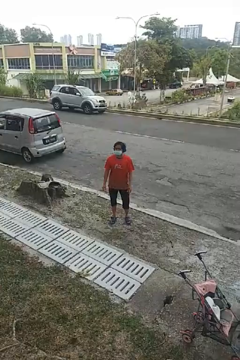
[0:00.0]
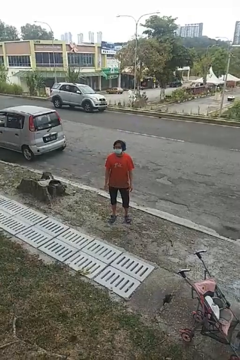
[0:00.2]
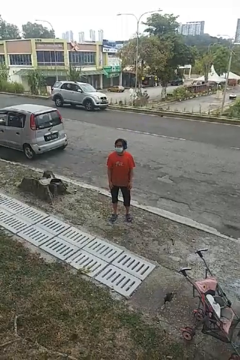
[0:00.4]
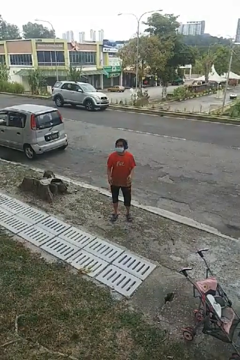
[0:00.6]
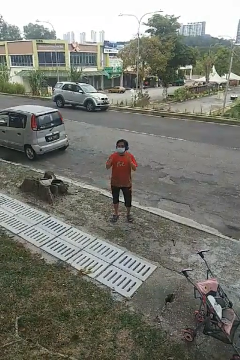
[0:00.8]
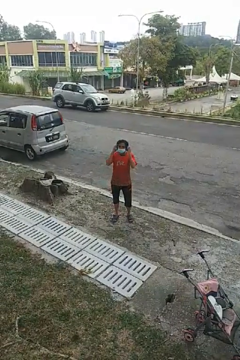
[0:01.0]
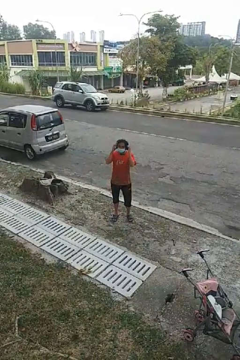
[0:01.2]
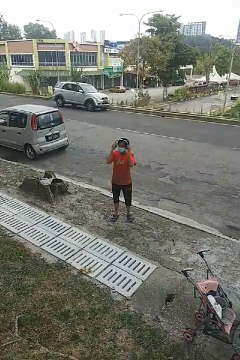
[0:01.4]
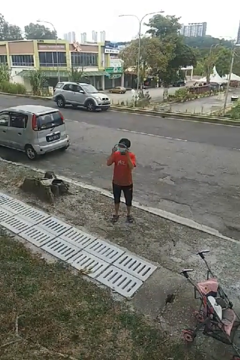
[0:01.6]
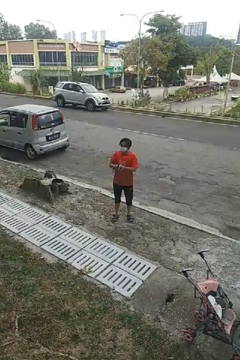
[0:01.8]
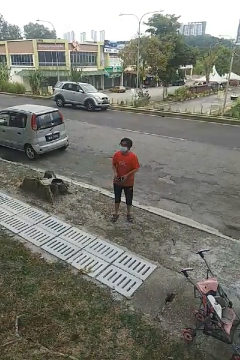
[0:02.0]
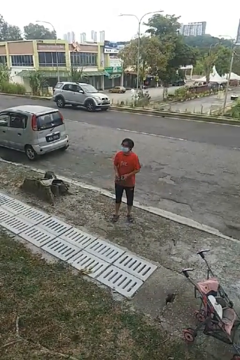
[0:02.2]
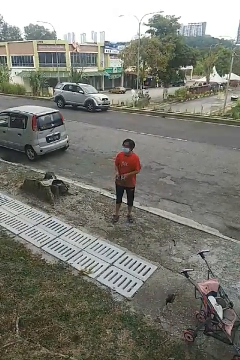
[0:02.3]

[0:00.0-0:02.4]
person takes off headphones

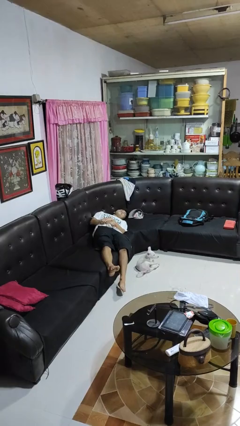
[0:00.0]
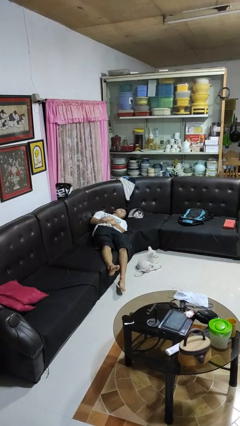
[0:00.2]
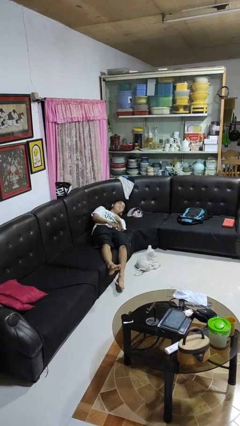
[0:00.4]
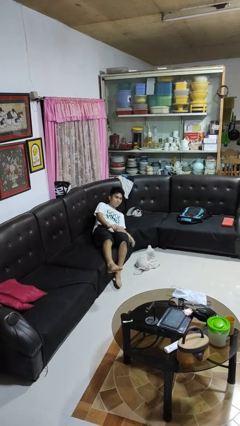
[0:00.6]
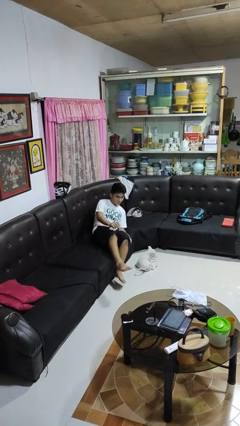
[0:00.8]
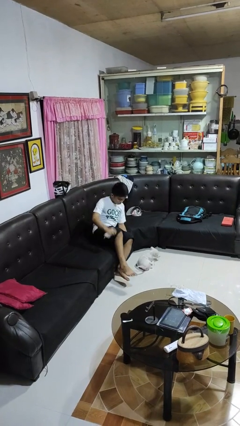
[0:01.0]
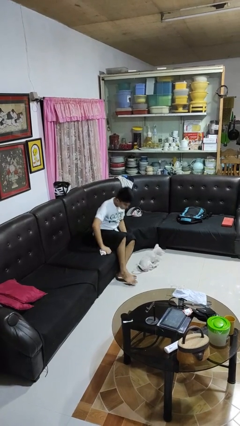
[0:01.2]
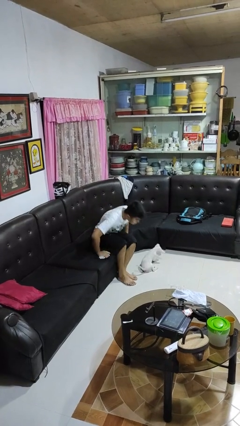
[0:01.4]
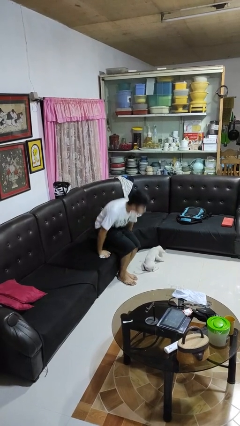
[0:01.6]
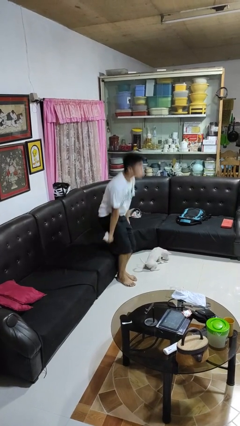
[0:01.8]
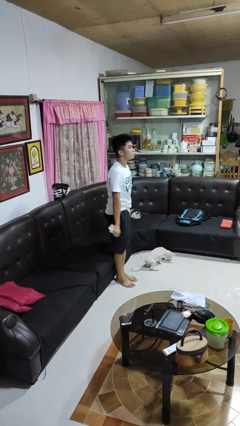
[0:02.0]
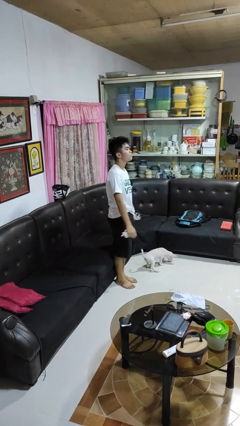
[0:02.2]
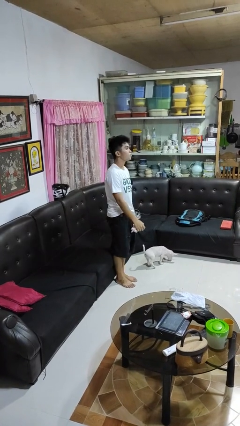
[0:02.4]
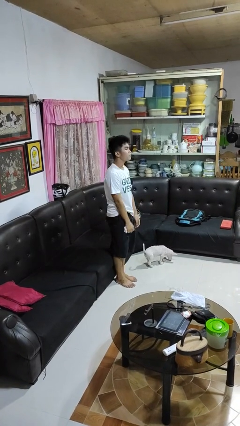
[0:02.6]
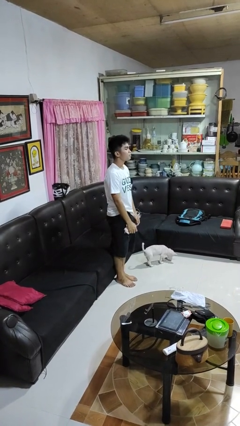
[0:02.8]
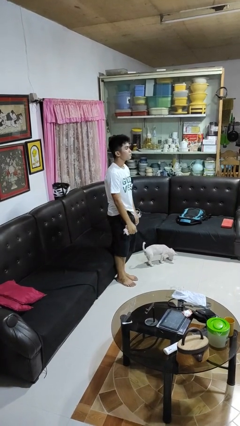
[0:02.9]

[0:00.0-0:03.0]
person stands up

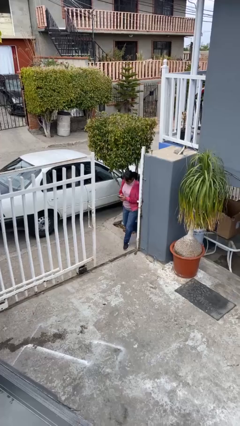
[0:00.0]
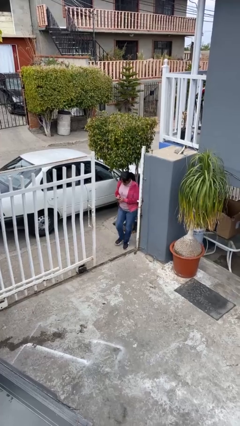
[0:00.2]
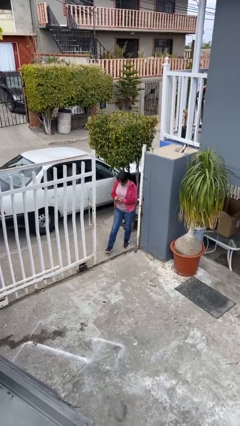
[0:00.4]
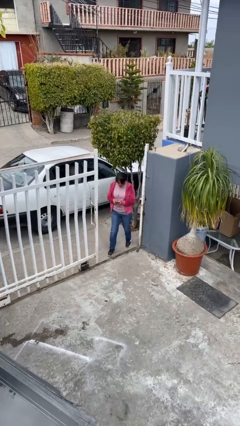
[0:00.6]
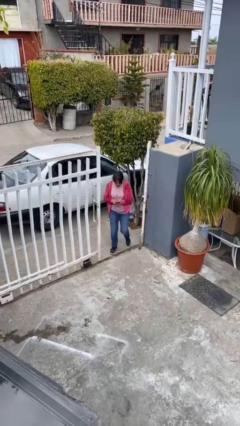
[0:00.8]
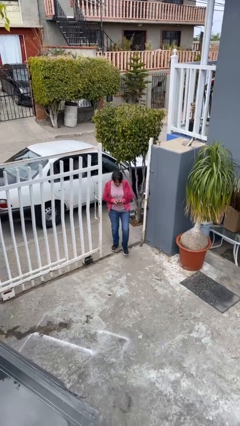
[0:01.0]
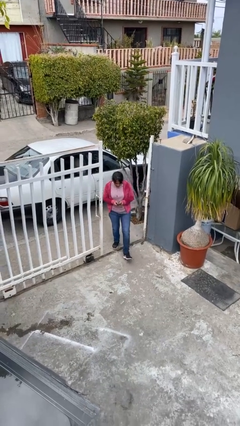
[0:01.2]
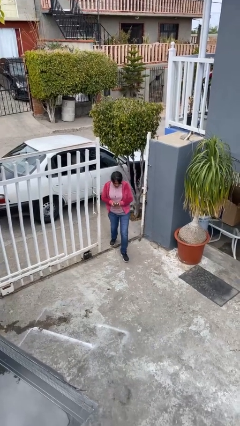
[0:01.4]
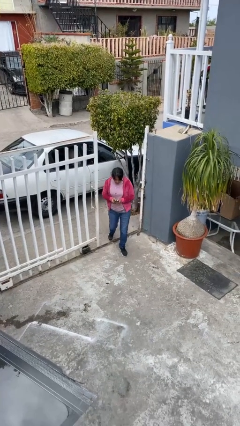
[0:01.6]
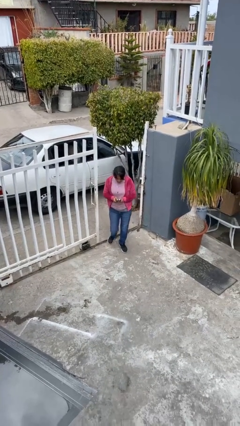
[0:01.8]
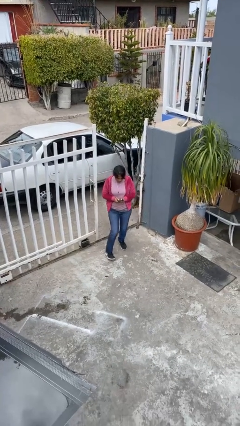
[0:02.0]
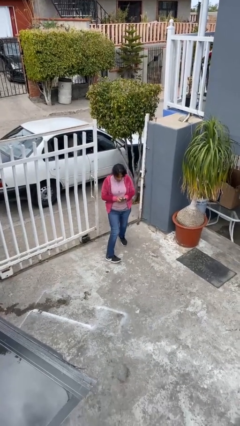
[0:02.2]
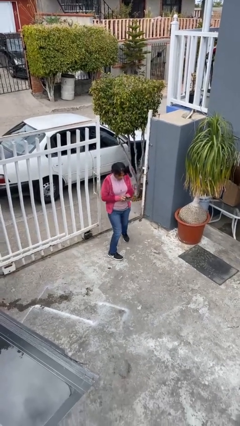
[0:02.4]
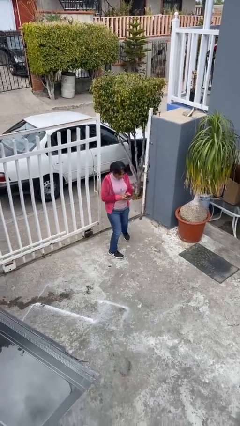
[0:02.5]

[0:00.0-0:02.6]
person enters scene through structure

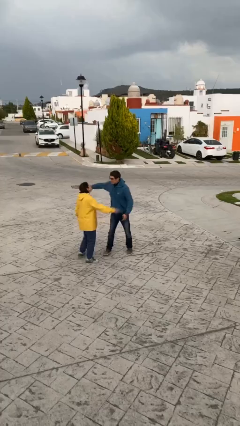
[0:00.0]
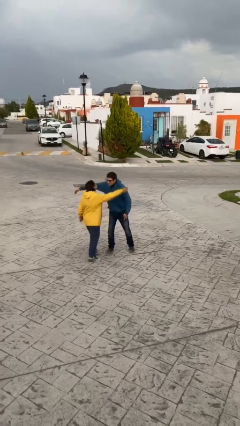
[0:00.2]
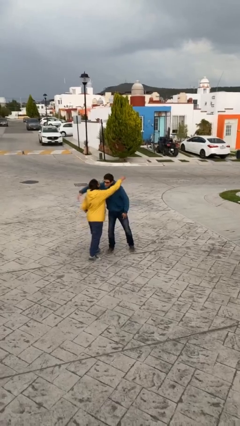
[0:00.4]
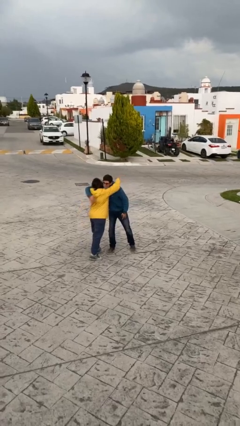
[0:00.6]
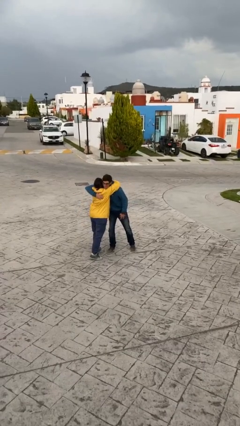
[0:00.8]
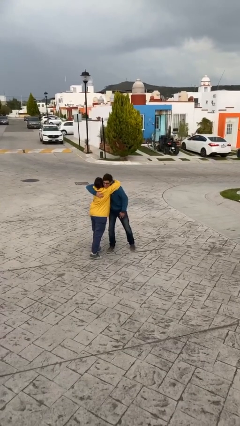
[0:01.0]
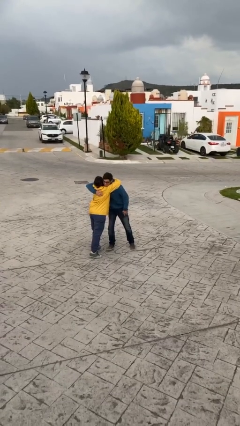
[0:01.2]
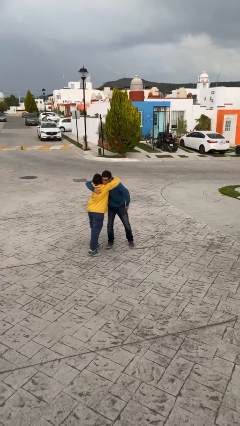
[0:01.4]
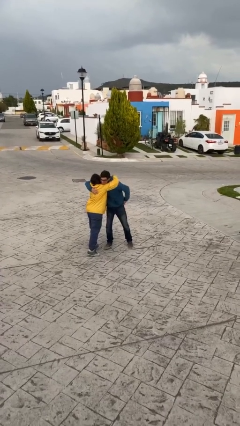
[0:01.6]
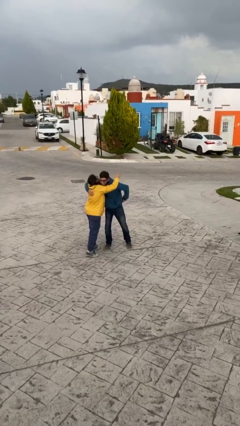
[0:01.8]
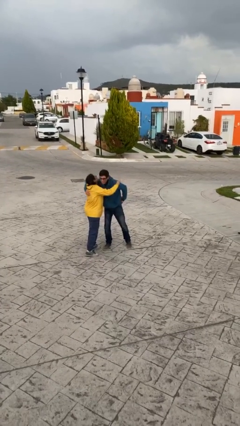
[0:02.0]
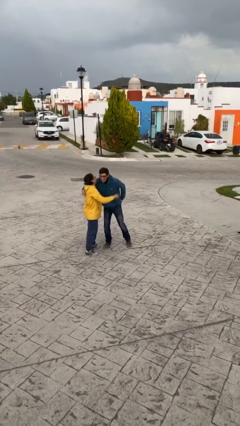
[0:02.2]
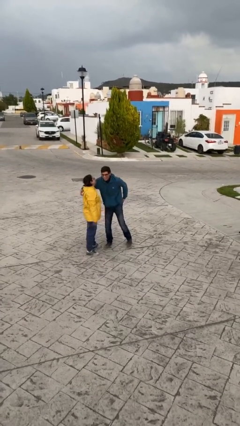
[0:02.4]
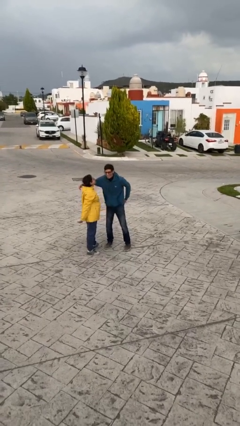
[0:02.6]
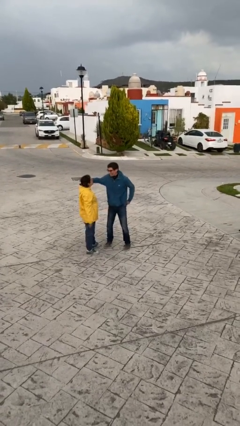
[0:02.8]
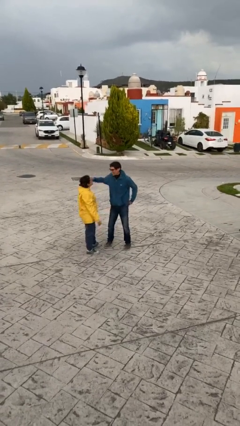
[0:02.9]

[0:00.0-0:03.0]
person embraces person

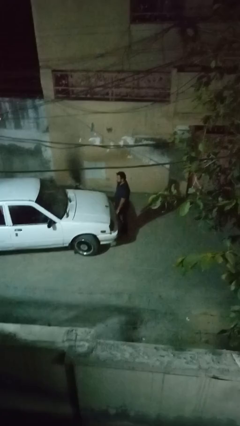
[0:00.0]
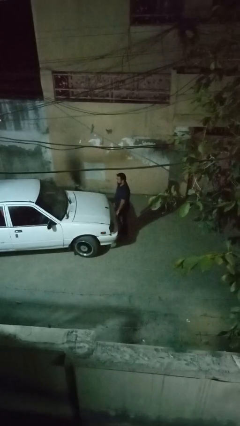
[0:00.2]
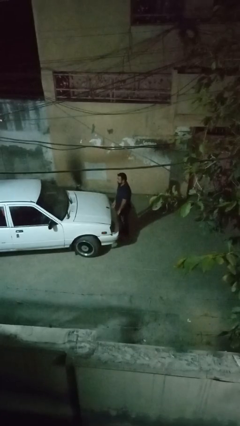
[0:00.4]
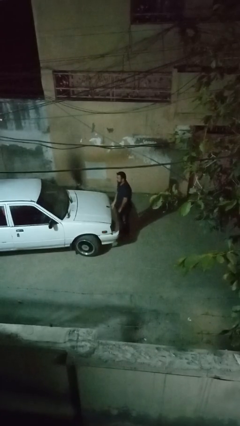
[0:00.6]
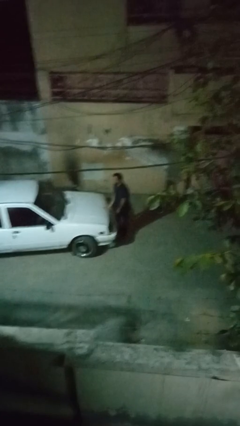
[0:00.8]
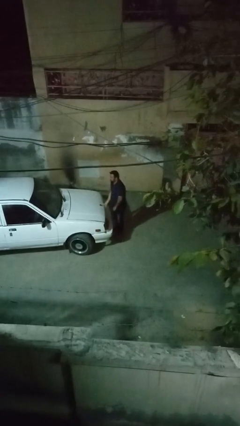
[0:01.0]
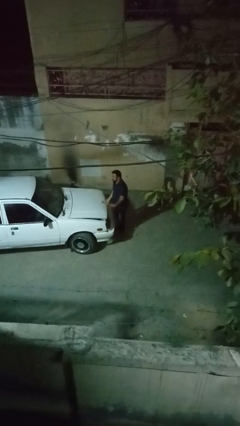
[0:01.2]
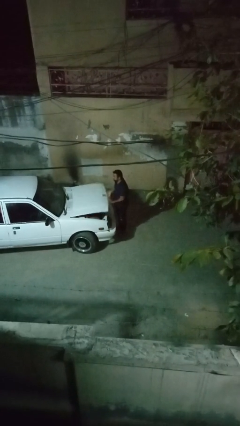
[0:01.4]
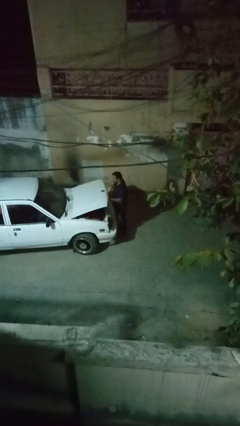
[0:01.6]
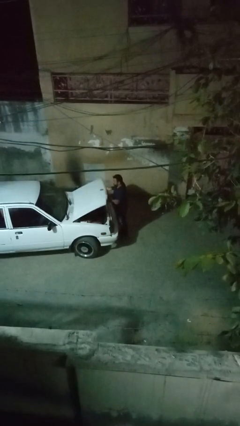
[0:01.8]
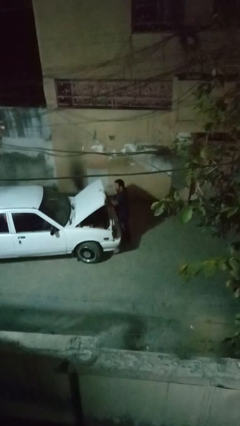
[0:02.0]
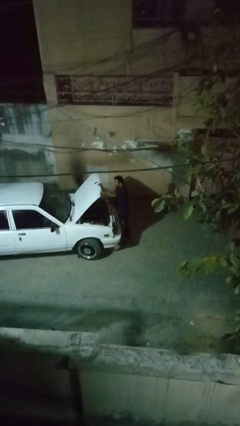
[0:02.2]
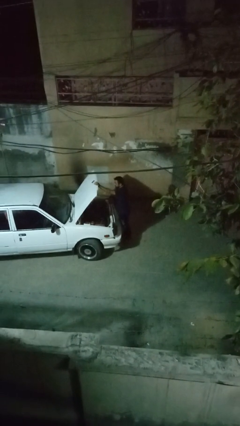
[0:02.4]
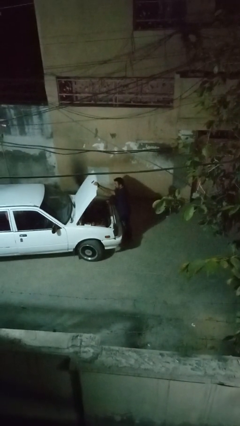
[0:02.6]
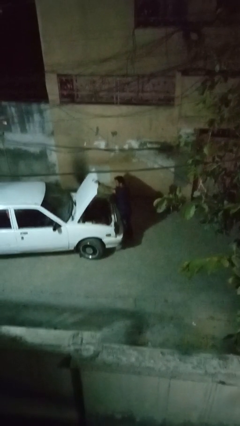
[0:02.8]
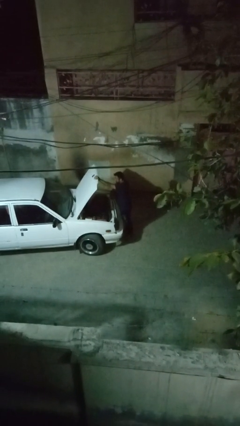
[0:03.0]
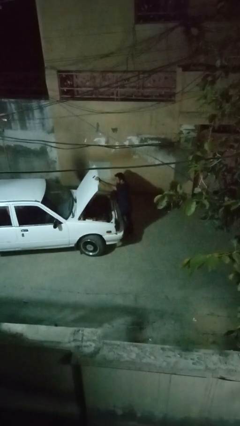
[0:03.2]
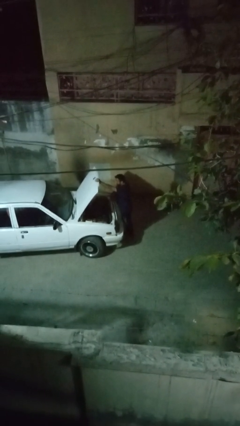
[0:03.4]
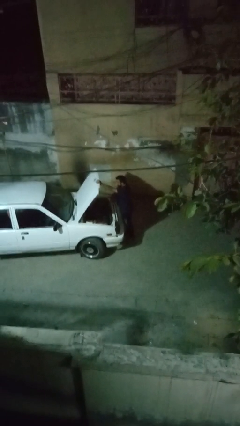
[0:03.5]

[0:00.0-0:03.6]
person opens car hood

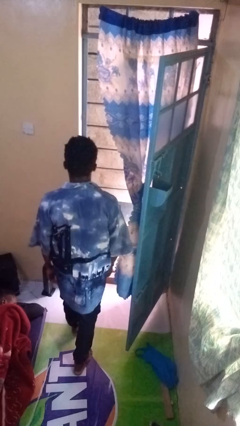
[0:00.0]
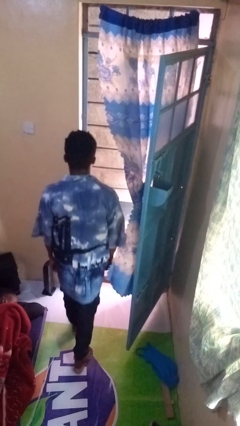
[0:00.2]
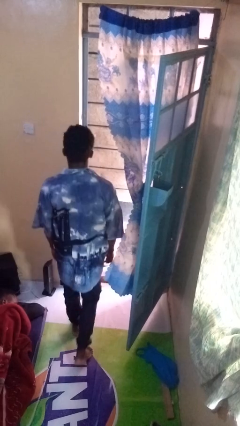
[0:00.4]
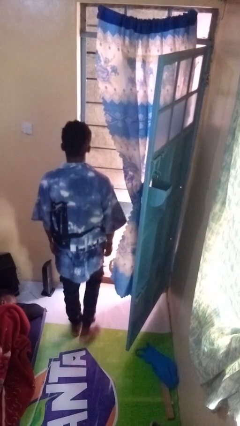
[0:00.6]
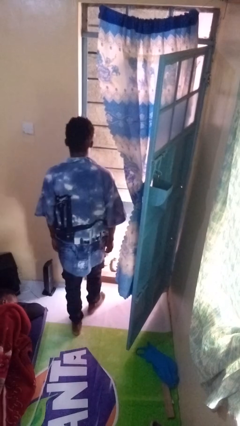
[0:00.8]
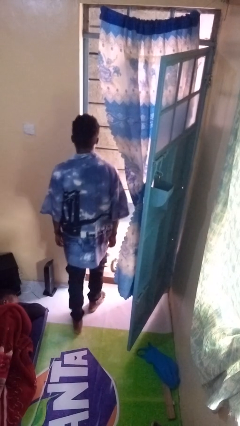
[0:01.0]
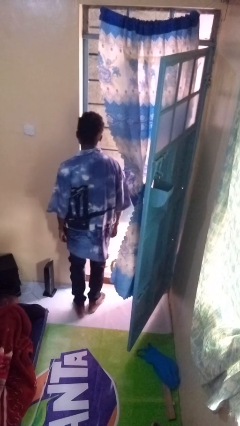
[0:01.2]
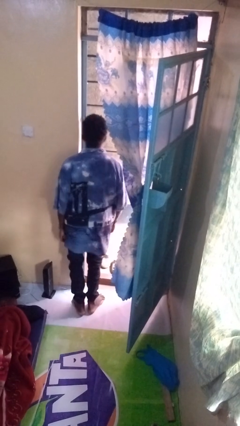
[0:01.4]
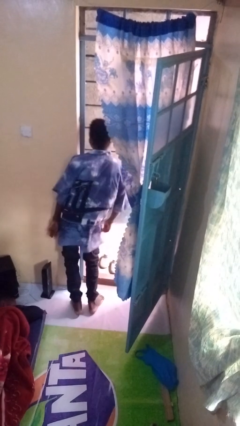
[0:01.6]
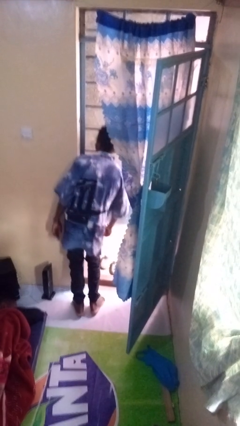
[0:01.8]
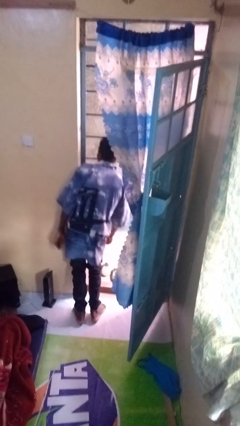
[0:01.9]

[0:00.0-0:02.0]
person bumps into wall

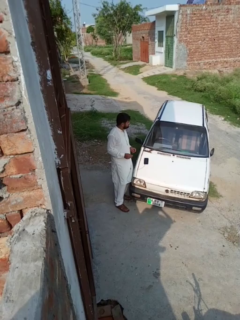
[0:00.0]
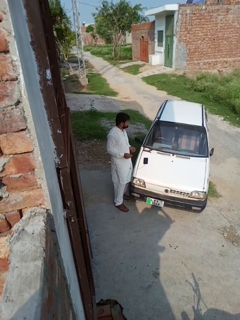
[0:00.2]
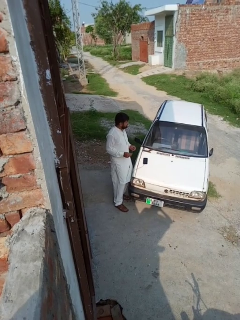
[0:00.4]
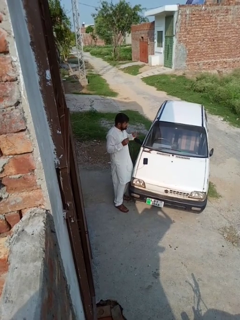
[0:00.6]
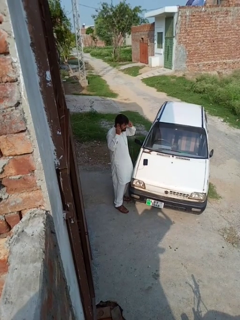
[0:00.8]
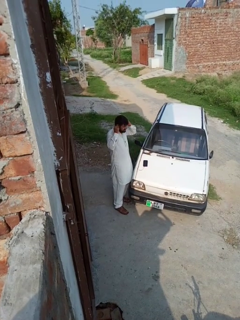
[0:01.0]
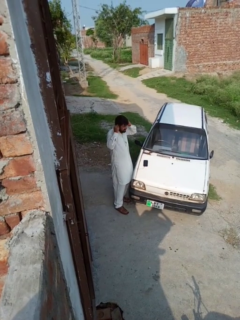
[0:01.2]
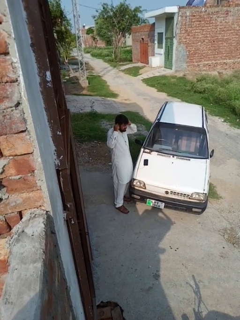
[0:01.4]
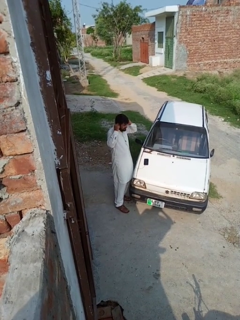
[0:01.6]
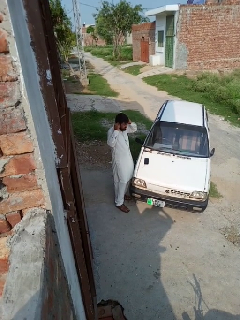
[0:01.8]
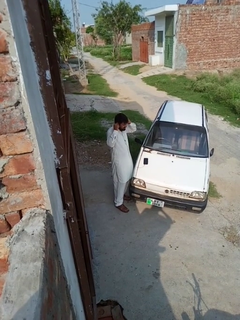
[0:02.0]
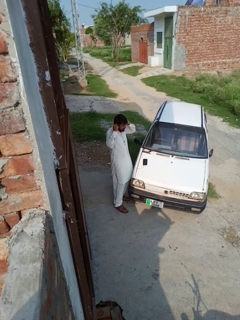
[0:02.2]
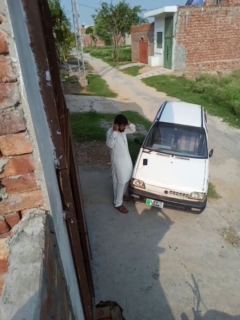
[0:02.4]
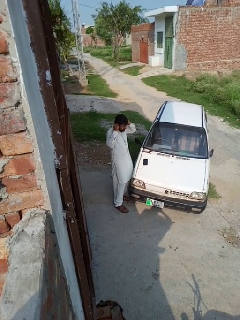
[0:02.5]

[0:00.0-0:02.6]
person puts on headphones
